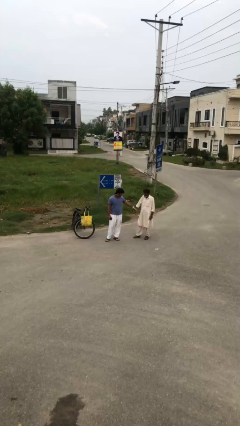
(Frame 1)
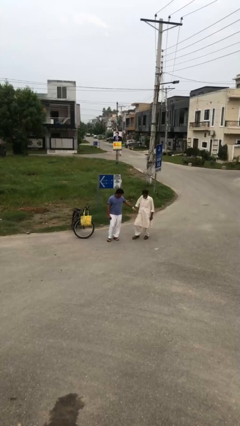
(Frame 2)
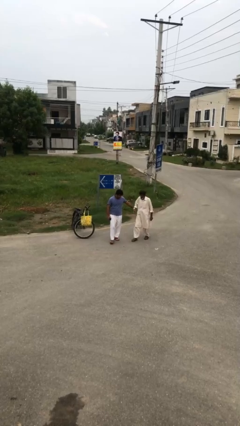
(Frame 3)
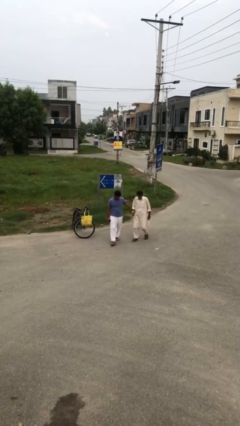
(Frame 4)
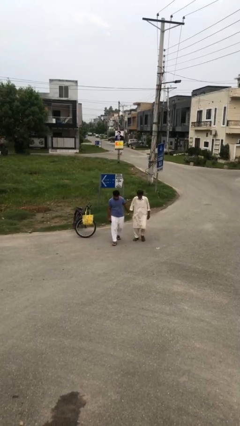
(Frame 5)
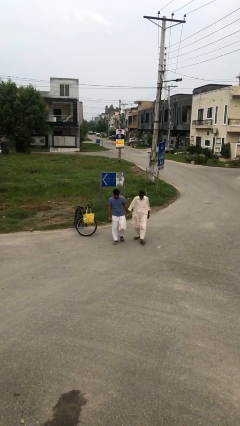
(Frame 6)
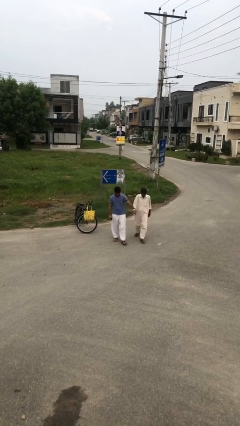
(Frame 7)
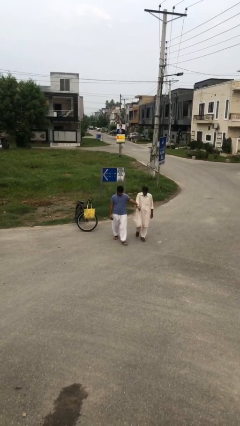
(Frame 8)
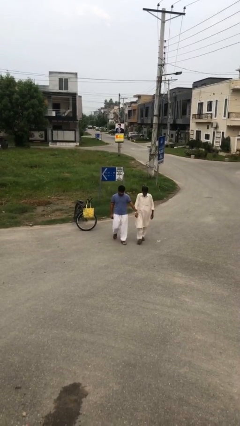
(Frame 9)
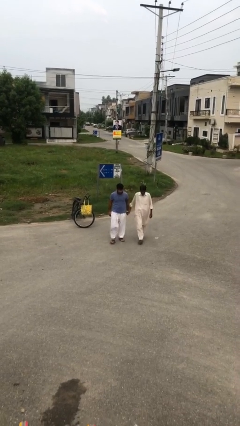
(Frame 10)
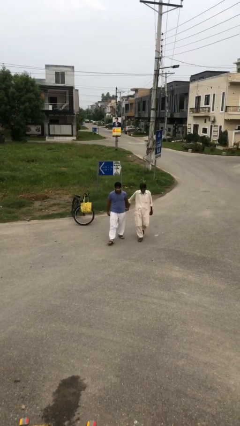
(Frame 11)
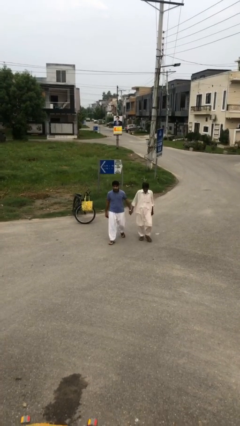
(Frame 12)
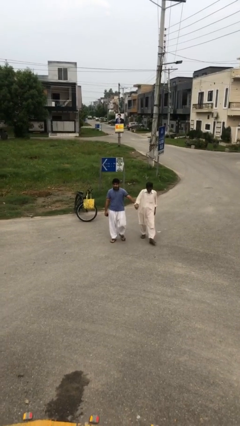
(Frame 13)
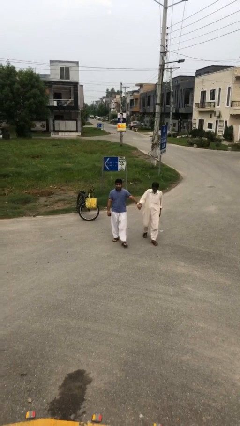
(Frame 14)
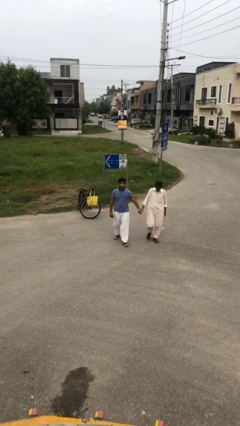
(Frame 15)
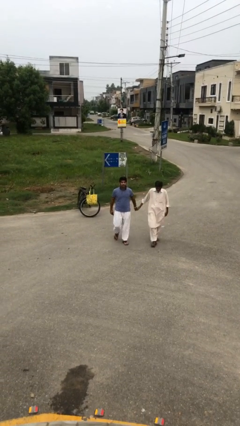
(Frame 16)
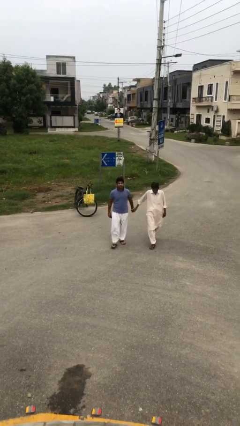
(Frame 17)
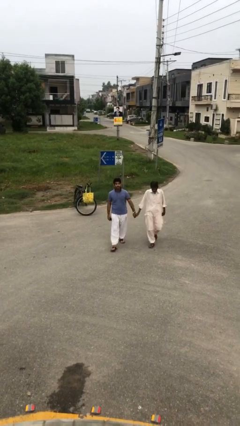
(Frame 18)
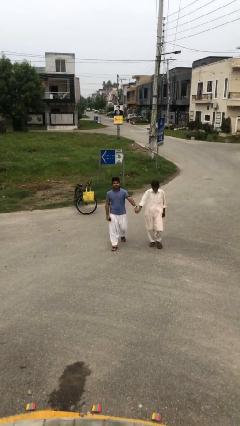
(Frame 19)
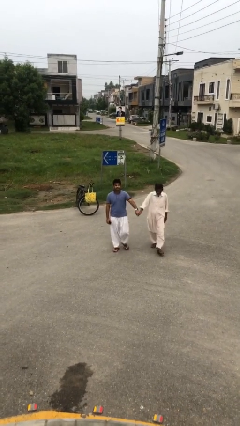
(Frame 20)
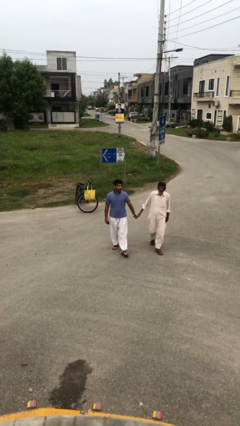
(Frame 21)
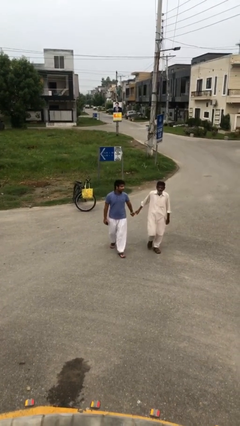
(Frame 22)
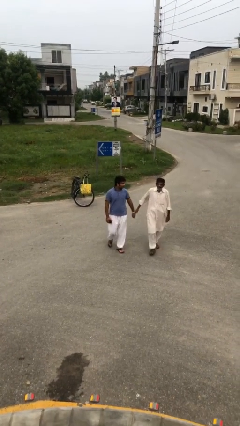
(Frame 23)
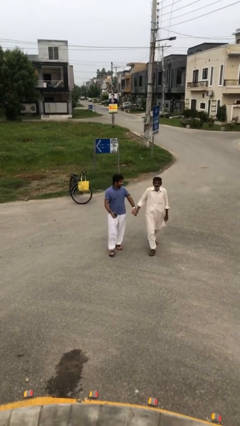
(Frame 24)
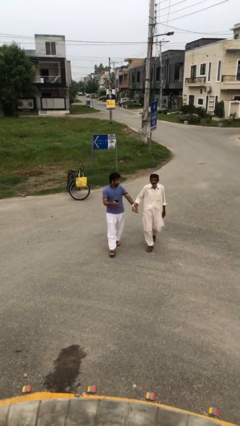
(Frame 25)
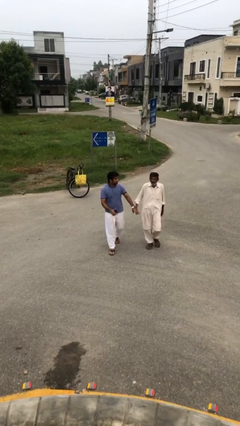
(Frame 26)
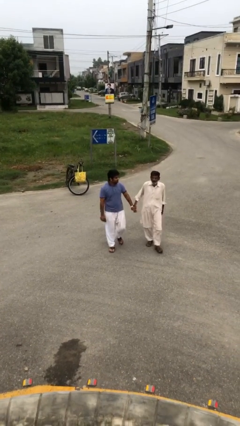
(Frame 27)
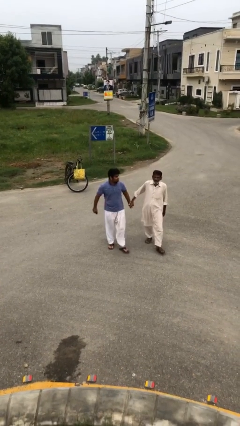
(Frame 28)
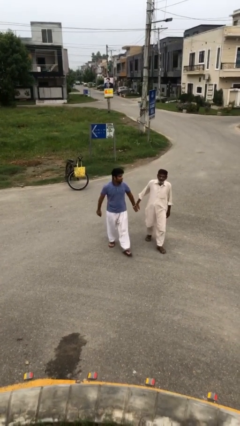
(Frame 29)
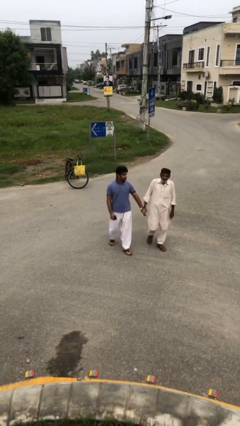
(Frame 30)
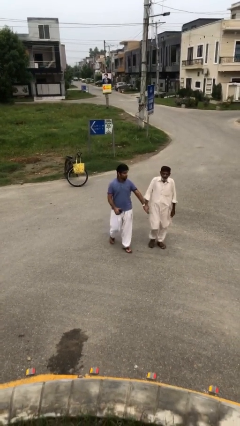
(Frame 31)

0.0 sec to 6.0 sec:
person holds hand

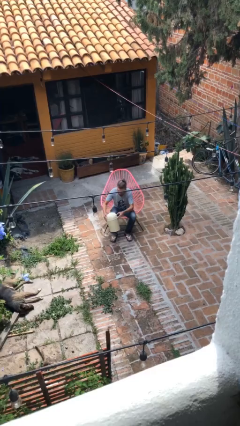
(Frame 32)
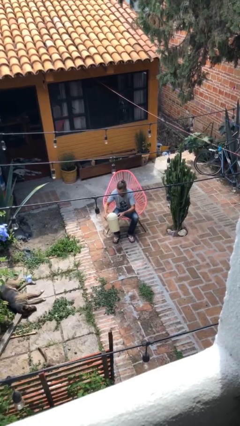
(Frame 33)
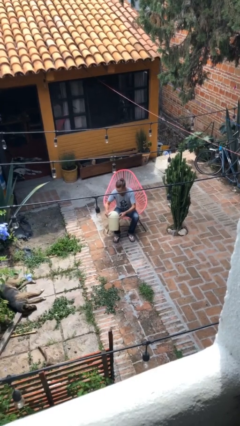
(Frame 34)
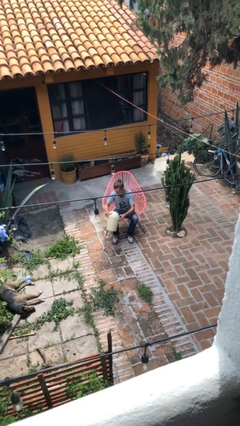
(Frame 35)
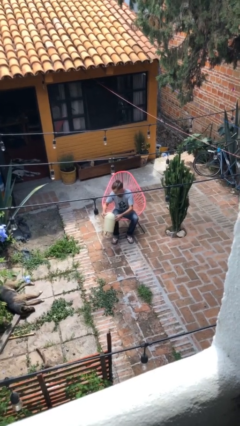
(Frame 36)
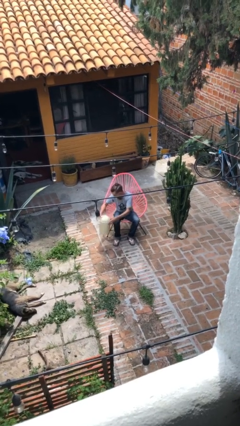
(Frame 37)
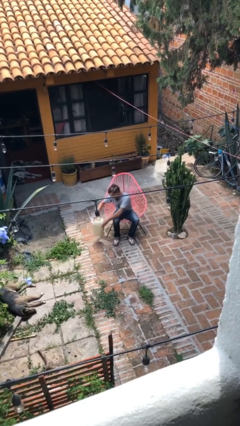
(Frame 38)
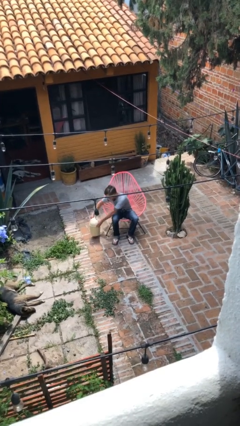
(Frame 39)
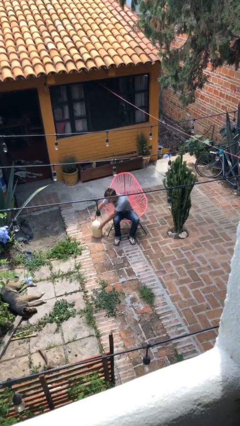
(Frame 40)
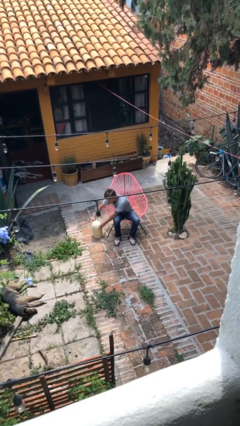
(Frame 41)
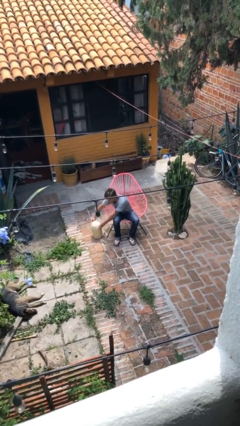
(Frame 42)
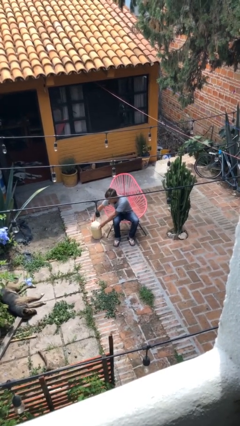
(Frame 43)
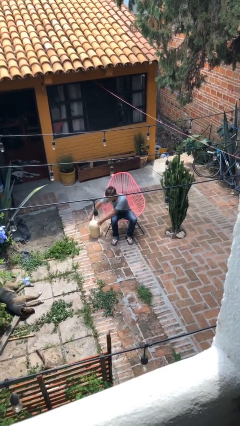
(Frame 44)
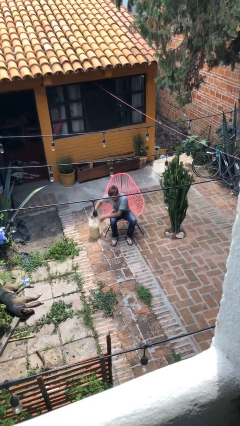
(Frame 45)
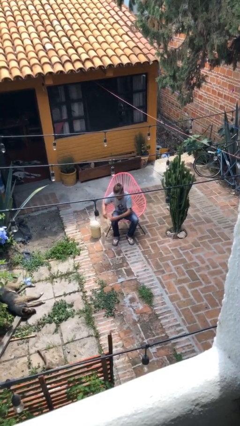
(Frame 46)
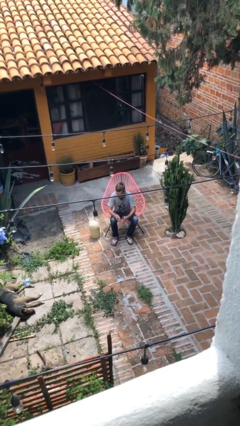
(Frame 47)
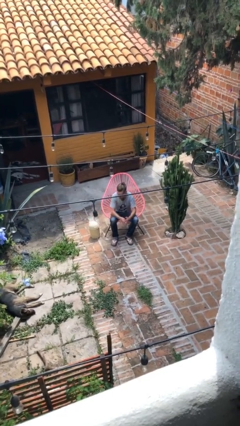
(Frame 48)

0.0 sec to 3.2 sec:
person puts down object on floor

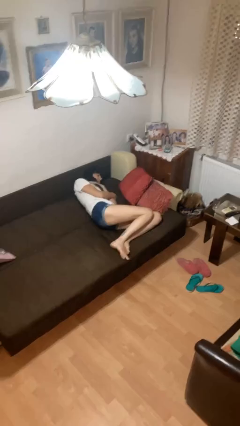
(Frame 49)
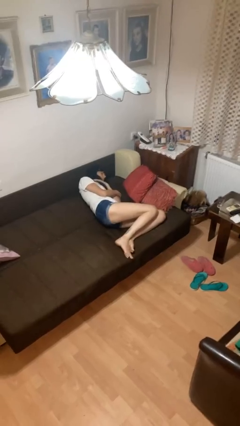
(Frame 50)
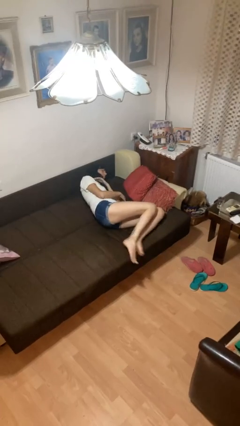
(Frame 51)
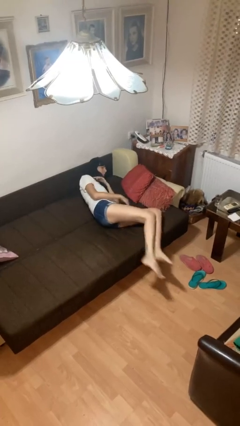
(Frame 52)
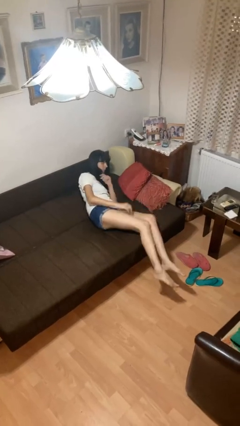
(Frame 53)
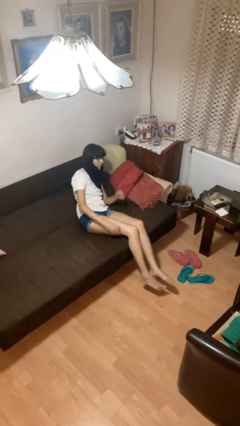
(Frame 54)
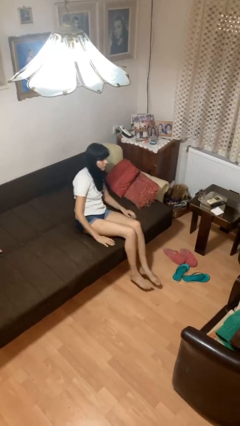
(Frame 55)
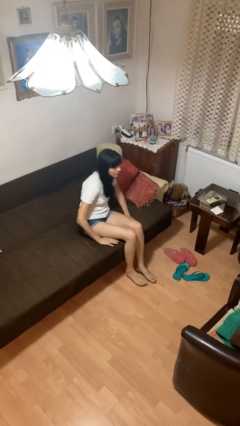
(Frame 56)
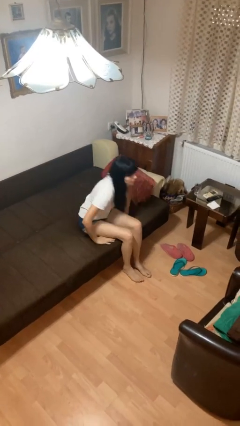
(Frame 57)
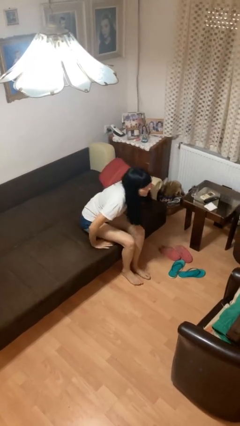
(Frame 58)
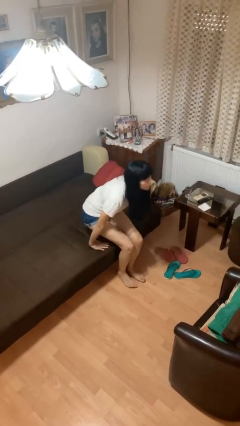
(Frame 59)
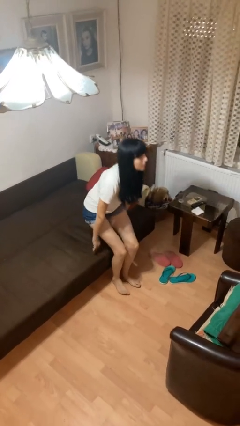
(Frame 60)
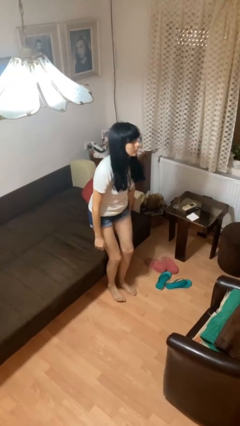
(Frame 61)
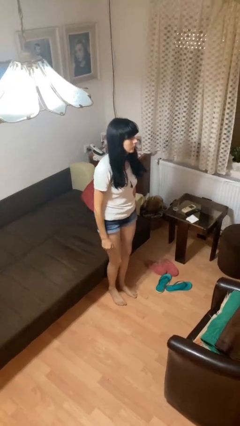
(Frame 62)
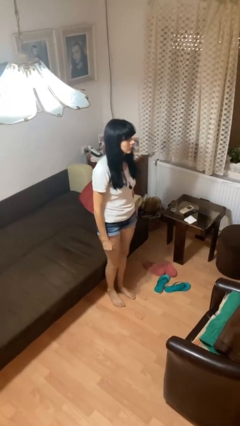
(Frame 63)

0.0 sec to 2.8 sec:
person stands up

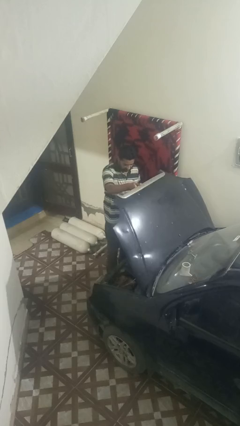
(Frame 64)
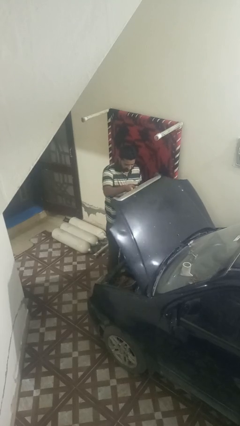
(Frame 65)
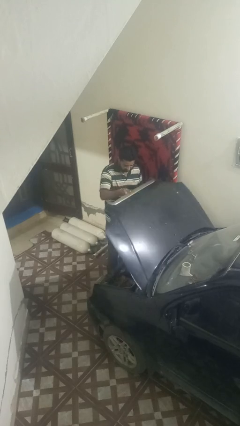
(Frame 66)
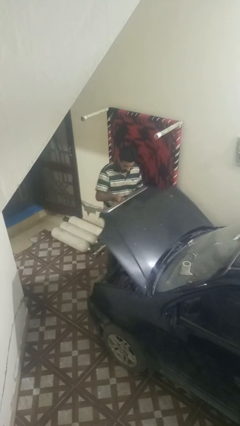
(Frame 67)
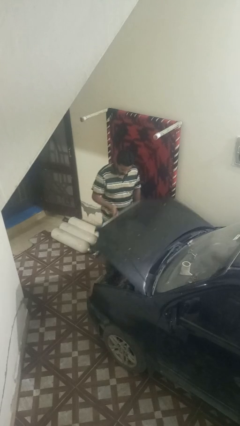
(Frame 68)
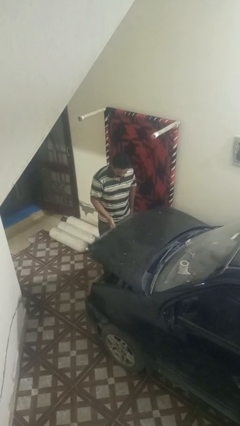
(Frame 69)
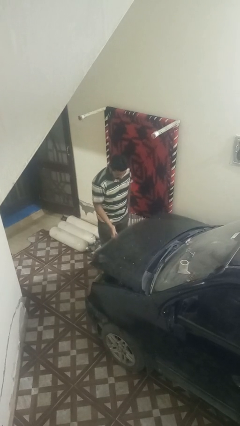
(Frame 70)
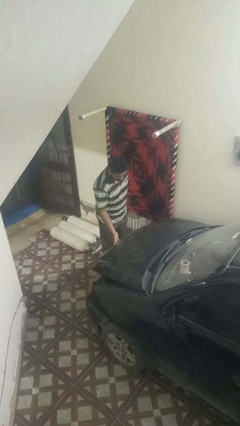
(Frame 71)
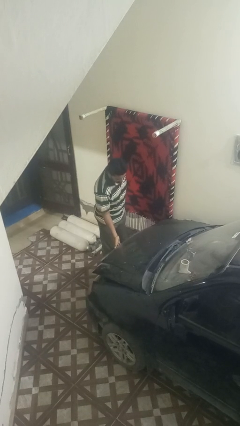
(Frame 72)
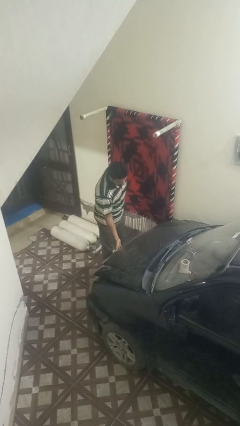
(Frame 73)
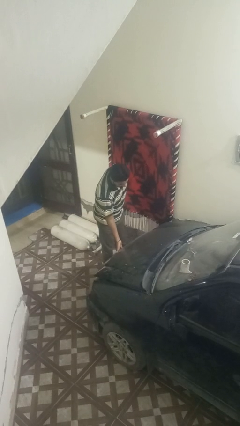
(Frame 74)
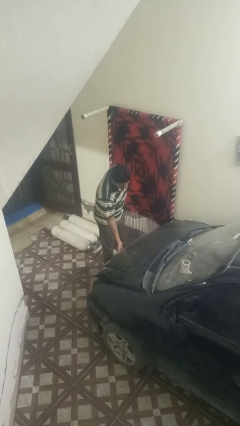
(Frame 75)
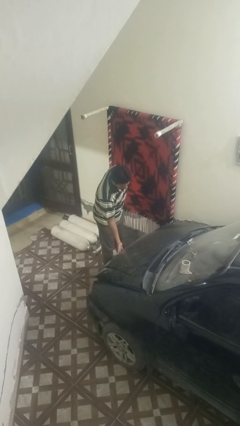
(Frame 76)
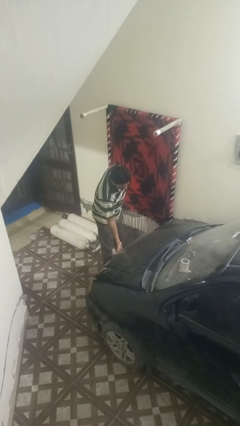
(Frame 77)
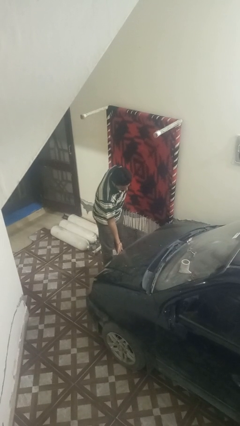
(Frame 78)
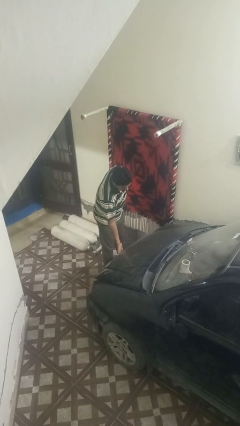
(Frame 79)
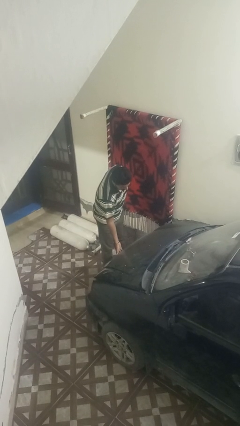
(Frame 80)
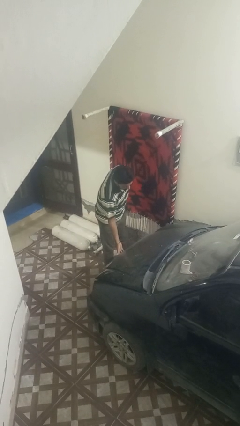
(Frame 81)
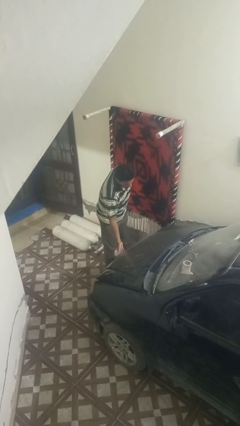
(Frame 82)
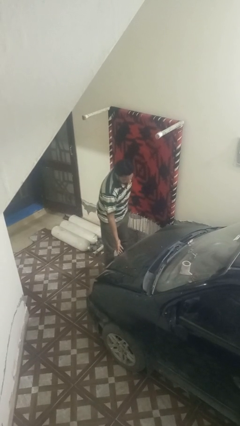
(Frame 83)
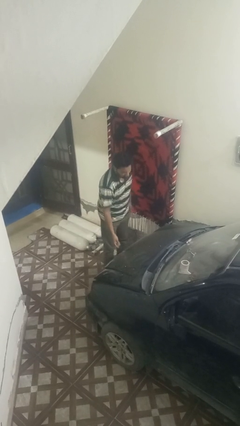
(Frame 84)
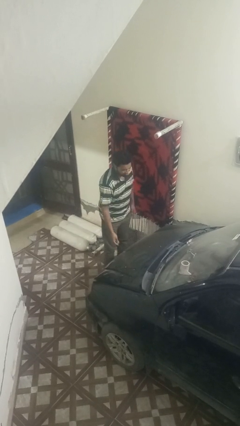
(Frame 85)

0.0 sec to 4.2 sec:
person closes car hood

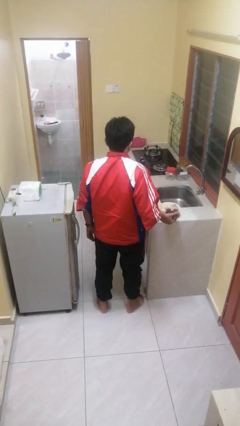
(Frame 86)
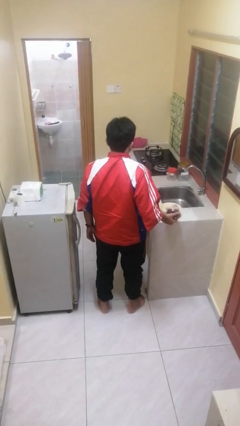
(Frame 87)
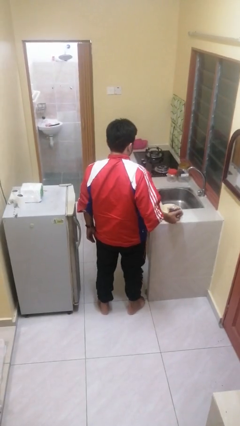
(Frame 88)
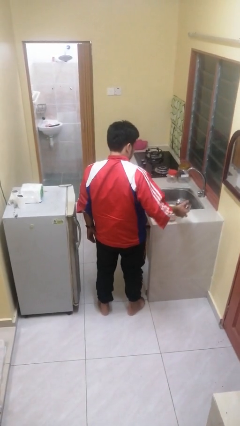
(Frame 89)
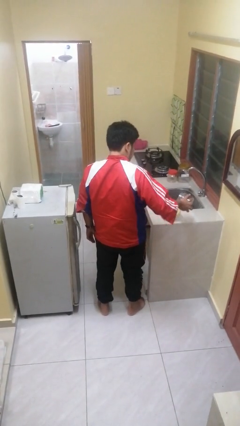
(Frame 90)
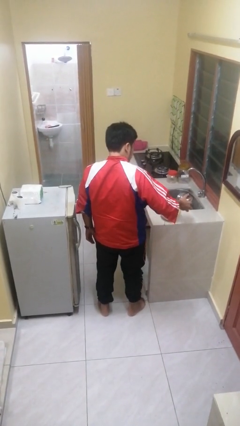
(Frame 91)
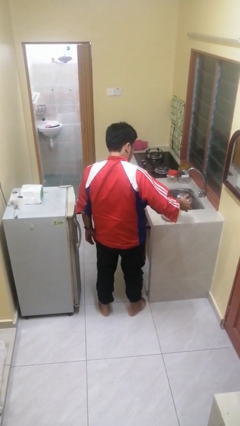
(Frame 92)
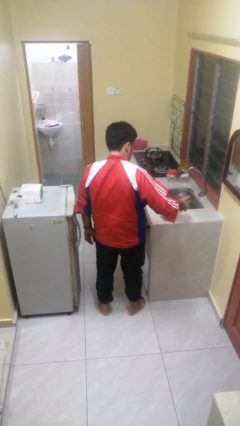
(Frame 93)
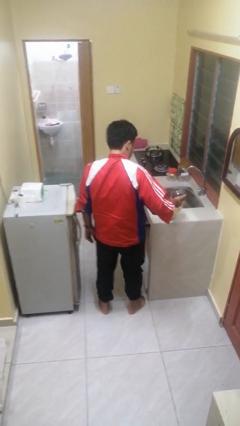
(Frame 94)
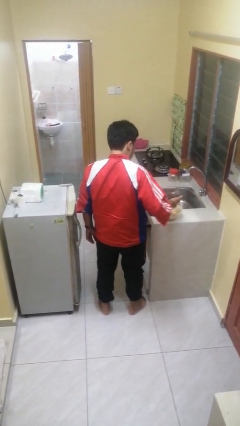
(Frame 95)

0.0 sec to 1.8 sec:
person pours into bowl
